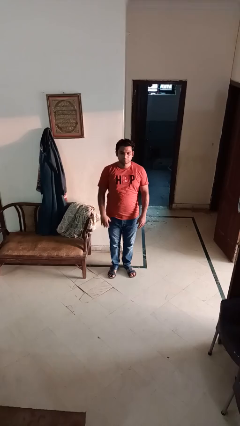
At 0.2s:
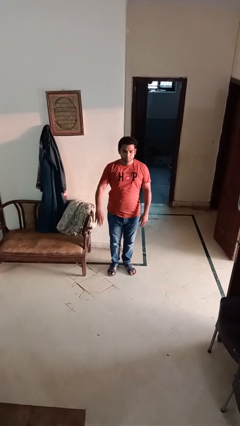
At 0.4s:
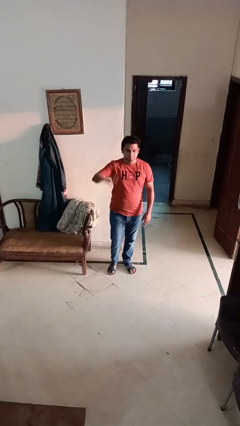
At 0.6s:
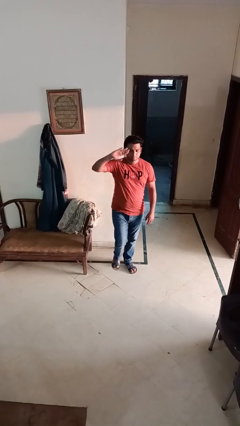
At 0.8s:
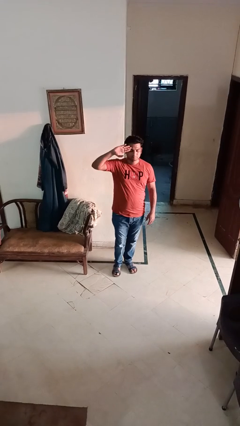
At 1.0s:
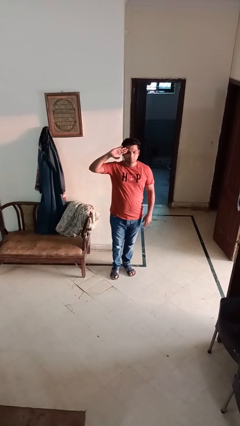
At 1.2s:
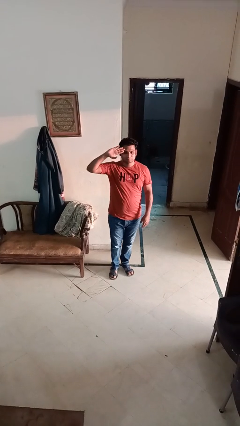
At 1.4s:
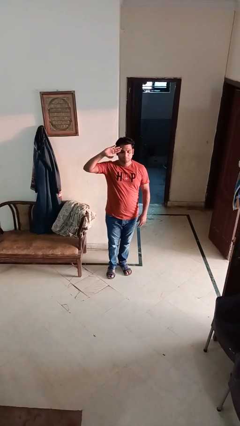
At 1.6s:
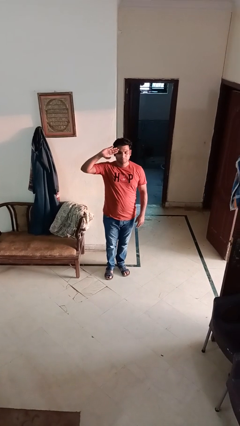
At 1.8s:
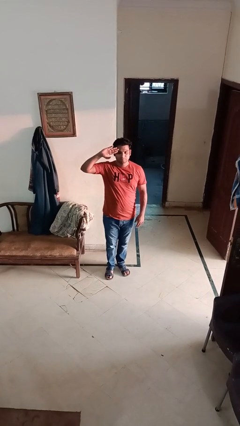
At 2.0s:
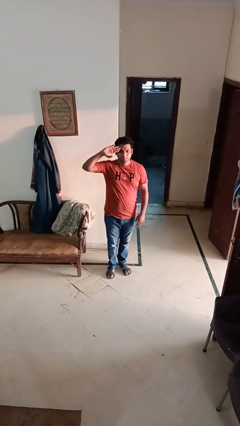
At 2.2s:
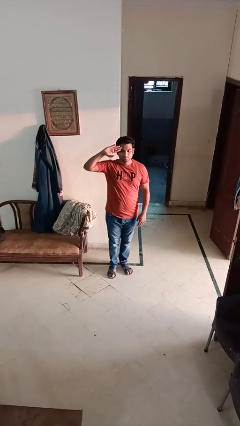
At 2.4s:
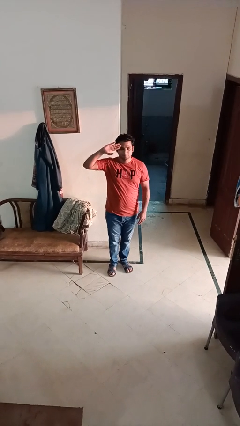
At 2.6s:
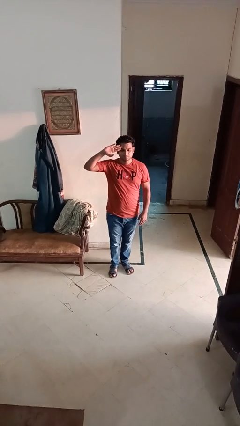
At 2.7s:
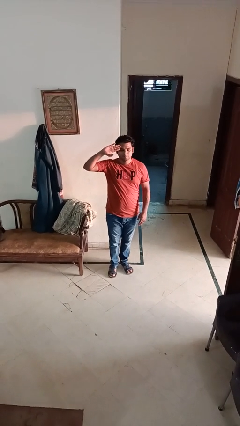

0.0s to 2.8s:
person salutes

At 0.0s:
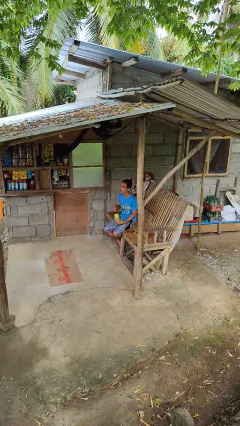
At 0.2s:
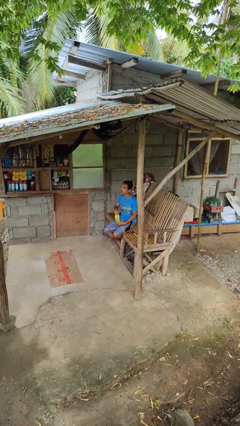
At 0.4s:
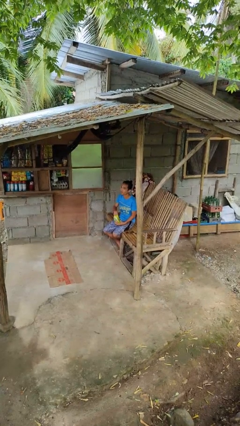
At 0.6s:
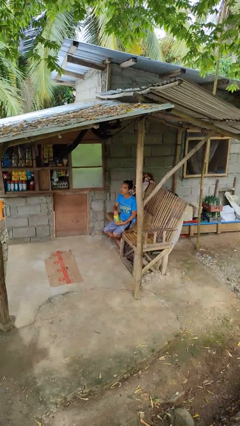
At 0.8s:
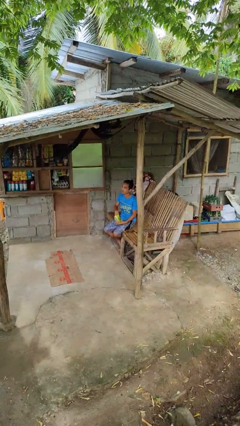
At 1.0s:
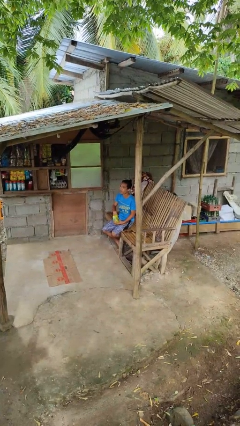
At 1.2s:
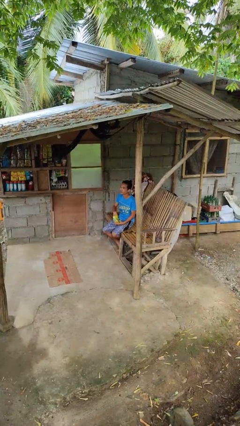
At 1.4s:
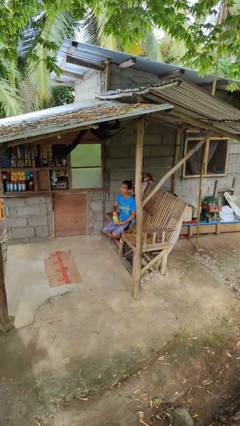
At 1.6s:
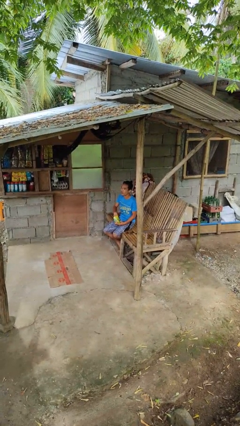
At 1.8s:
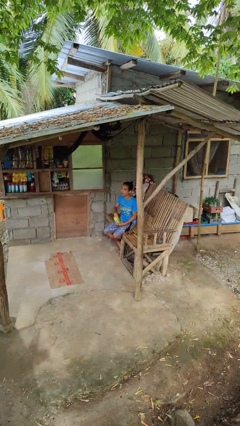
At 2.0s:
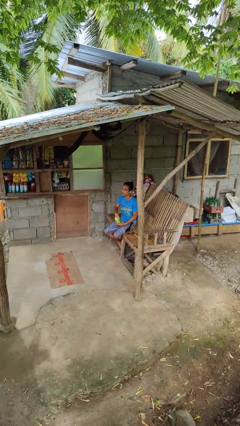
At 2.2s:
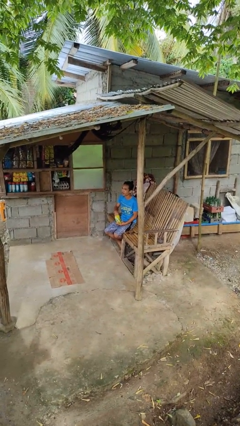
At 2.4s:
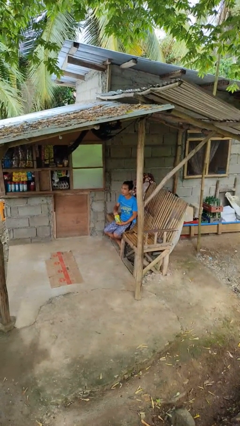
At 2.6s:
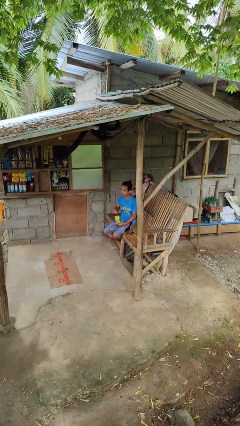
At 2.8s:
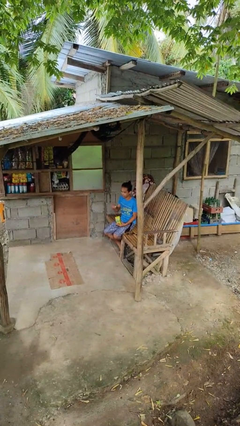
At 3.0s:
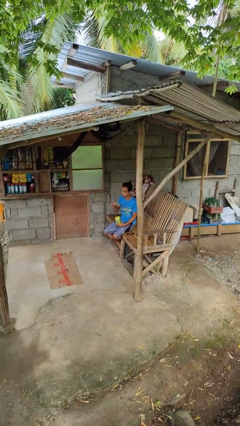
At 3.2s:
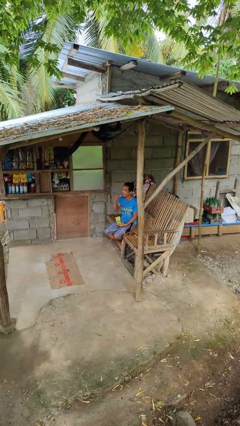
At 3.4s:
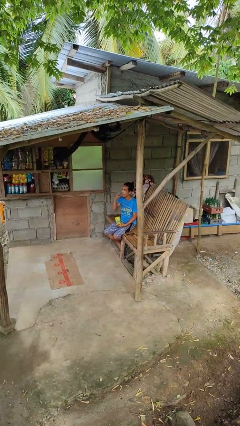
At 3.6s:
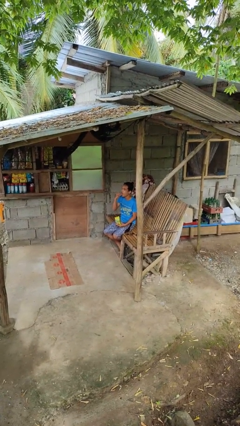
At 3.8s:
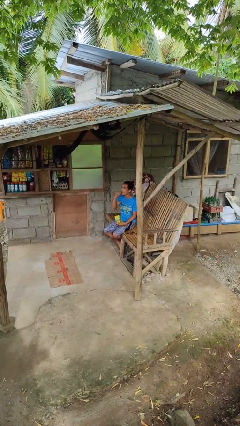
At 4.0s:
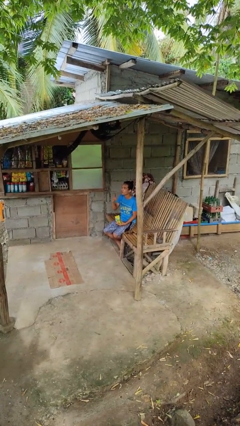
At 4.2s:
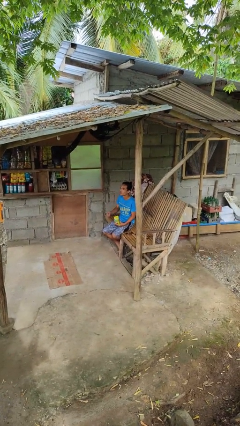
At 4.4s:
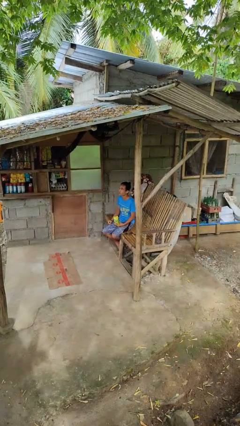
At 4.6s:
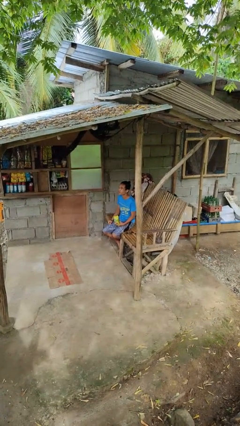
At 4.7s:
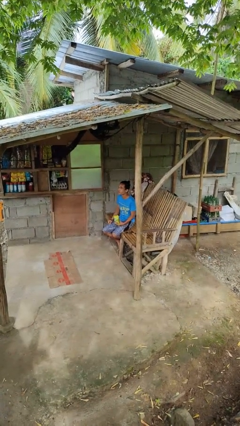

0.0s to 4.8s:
person eats snack from bag

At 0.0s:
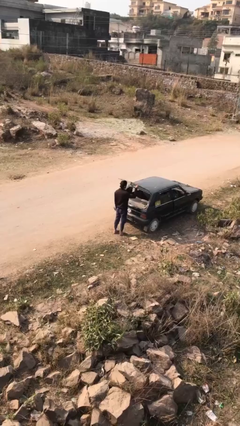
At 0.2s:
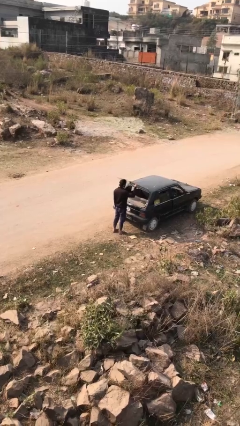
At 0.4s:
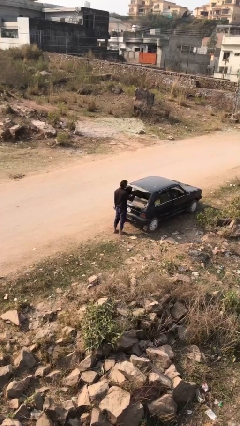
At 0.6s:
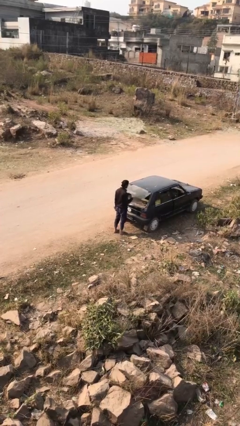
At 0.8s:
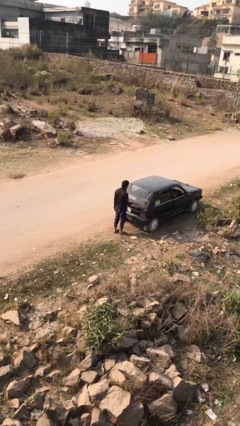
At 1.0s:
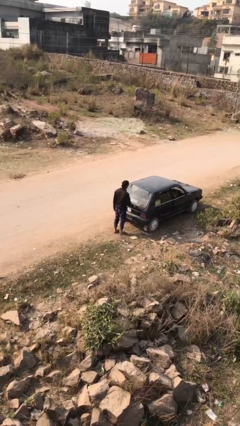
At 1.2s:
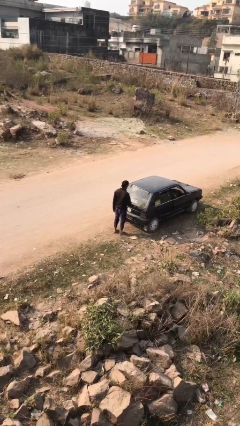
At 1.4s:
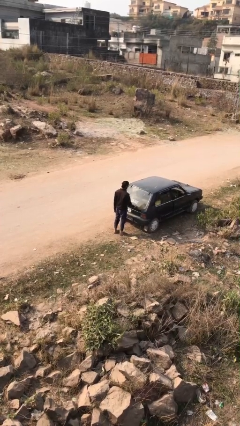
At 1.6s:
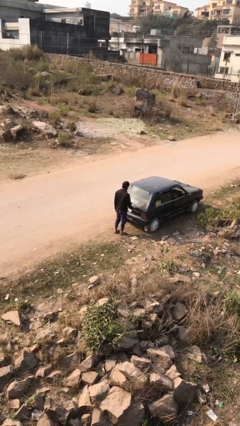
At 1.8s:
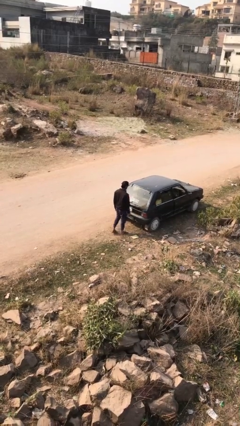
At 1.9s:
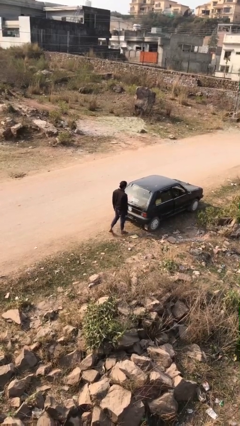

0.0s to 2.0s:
person closes car trunk

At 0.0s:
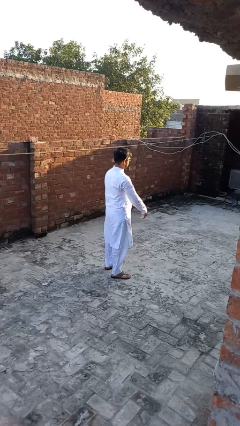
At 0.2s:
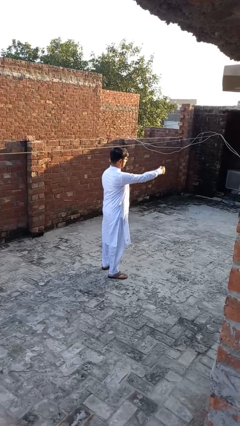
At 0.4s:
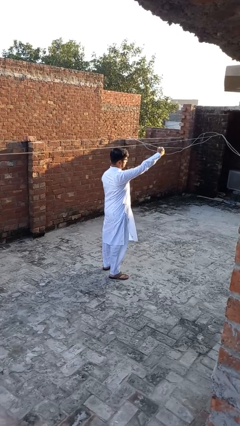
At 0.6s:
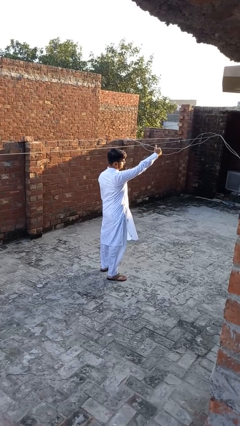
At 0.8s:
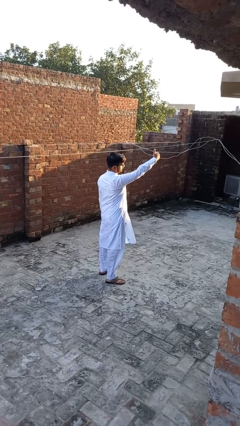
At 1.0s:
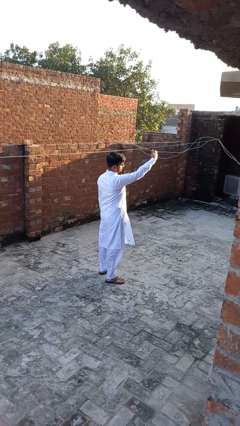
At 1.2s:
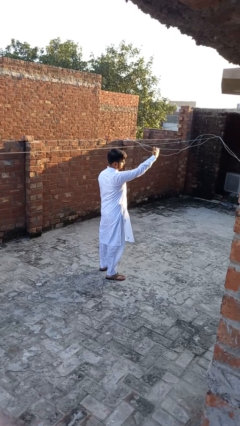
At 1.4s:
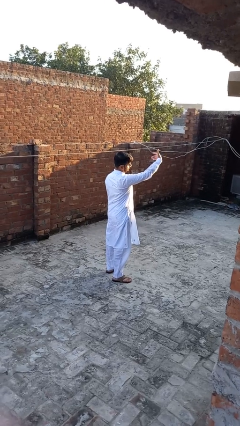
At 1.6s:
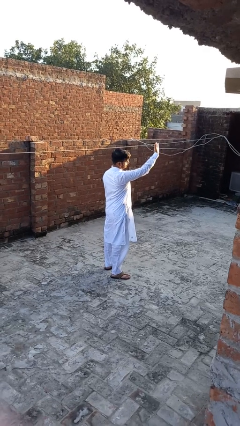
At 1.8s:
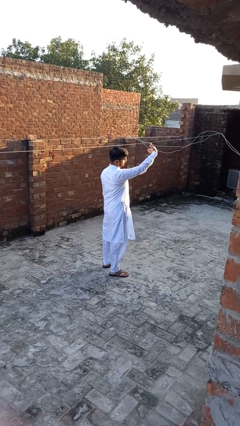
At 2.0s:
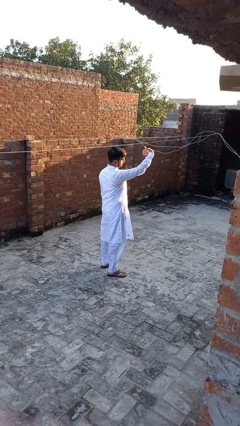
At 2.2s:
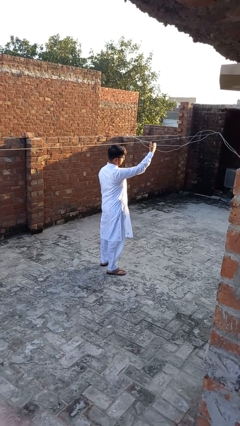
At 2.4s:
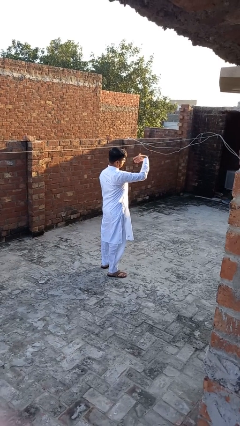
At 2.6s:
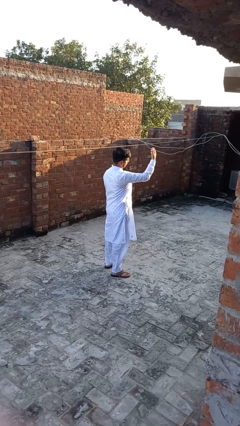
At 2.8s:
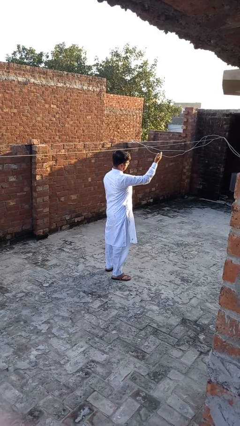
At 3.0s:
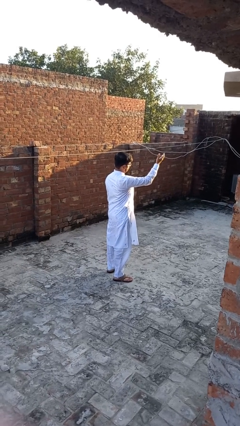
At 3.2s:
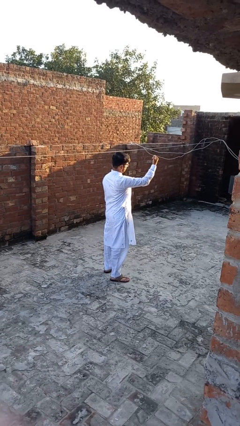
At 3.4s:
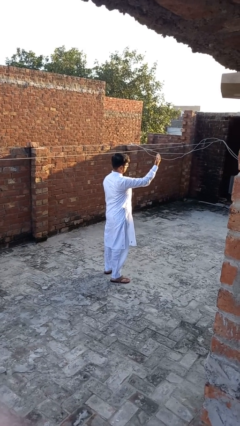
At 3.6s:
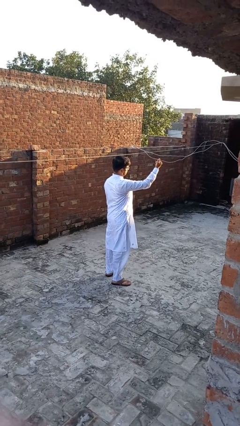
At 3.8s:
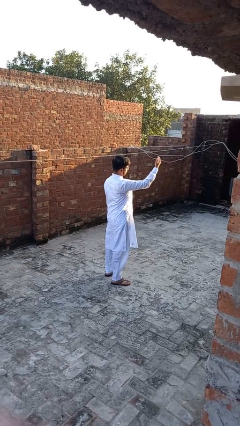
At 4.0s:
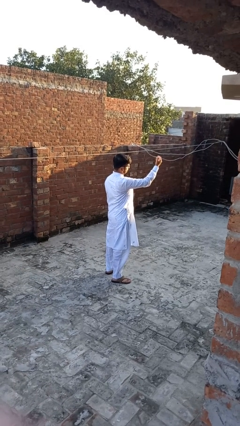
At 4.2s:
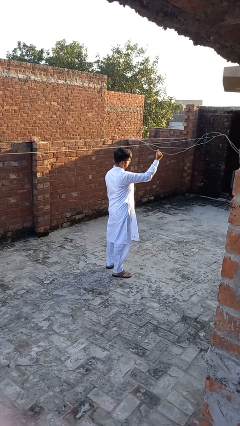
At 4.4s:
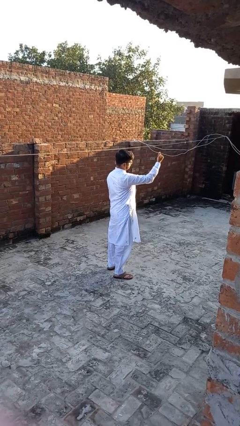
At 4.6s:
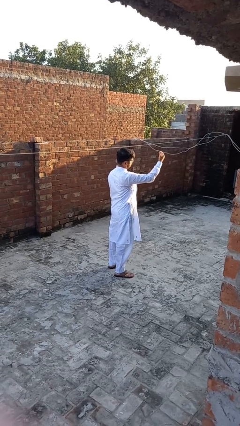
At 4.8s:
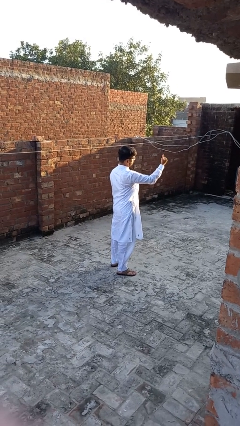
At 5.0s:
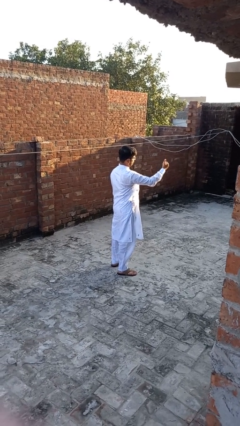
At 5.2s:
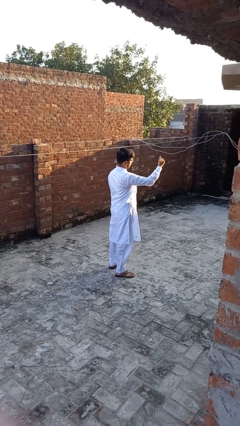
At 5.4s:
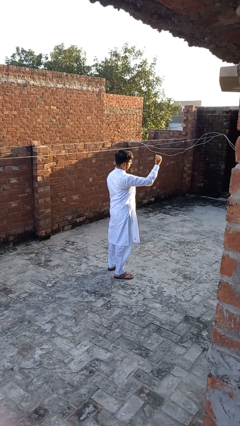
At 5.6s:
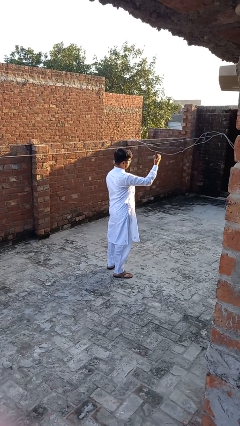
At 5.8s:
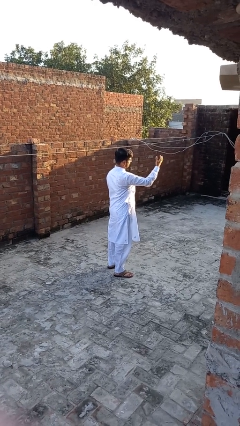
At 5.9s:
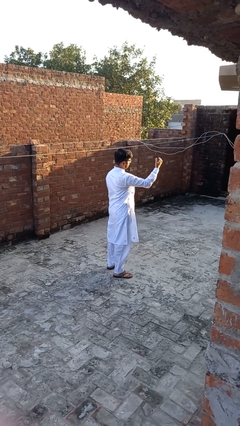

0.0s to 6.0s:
person gestures come here

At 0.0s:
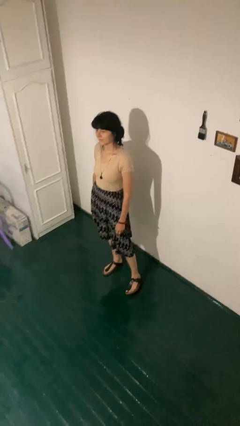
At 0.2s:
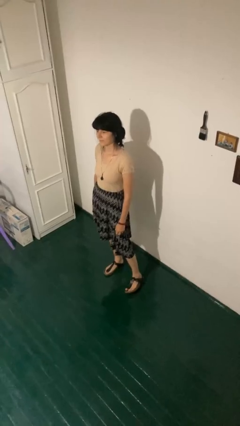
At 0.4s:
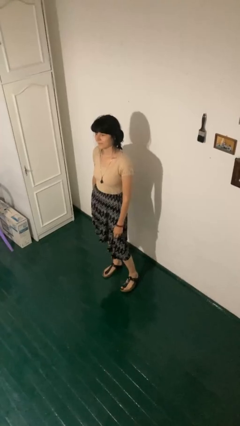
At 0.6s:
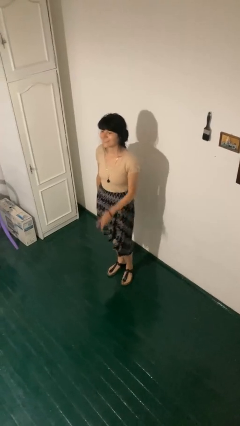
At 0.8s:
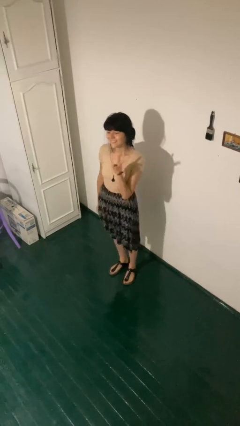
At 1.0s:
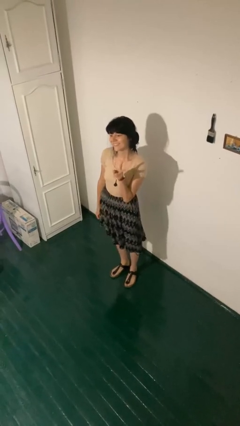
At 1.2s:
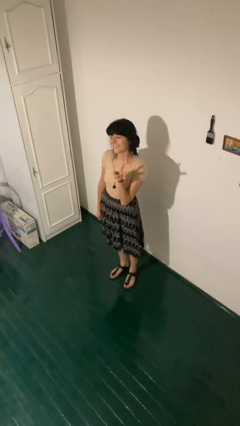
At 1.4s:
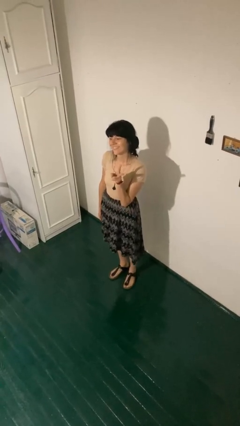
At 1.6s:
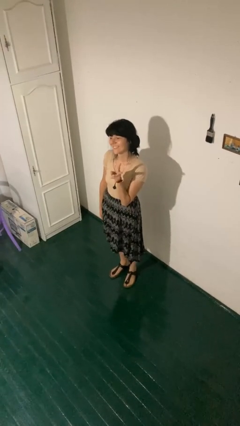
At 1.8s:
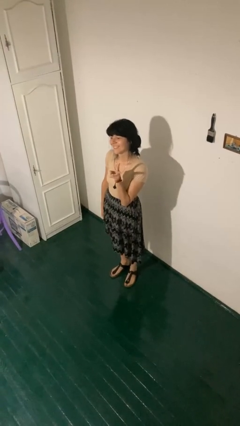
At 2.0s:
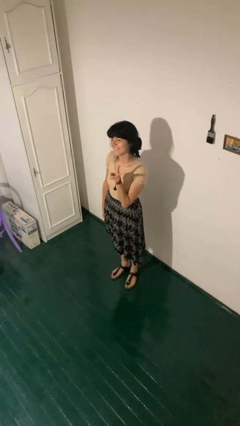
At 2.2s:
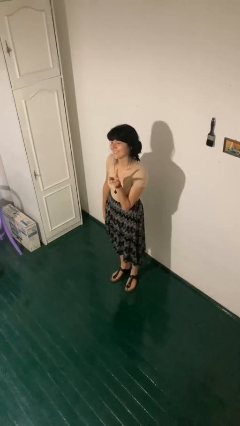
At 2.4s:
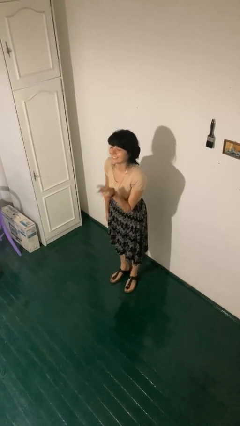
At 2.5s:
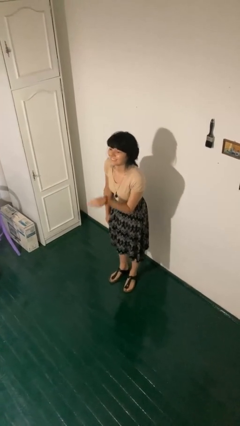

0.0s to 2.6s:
person gestures peace
